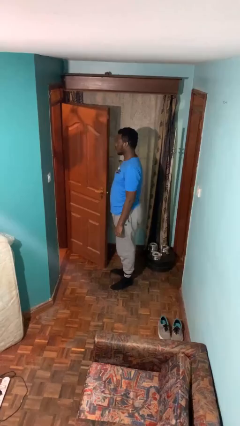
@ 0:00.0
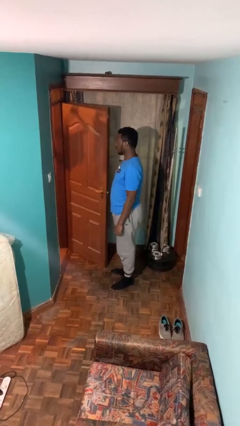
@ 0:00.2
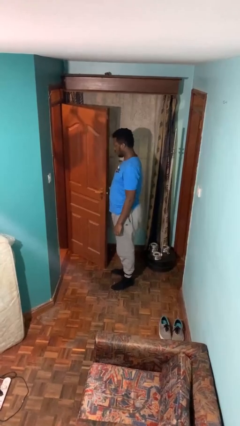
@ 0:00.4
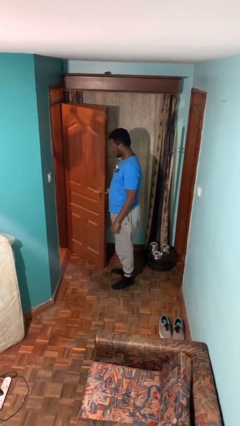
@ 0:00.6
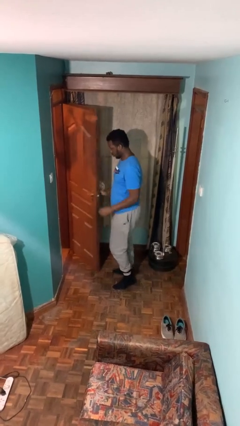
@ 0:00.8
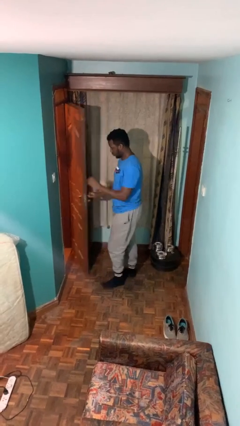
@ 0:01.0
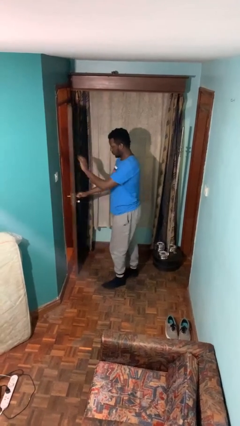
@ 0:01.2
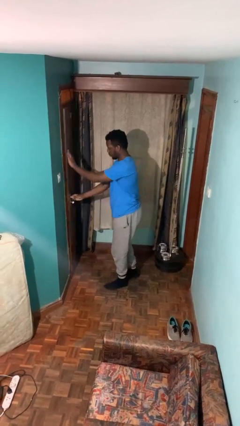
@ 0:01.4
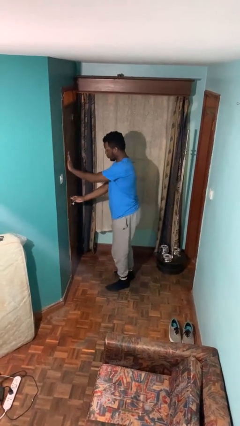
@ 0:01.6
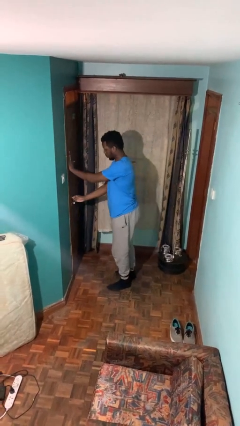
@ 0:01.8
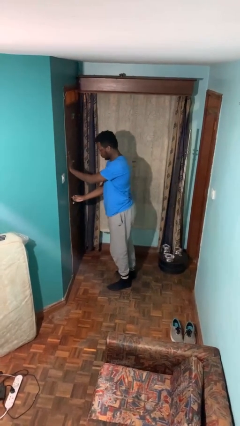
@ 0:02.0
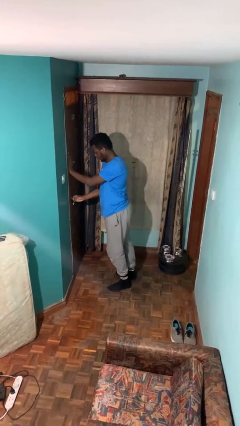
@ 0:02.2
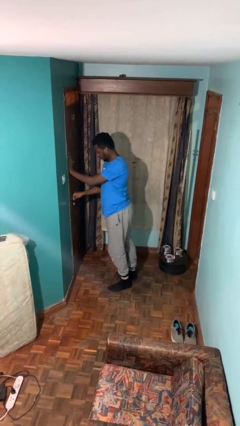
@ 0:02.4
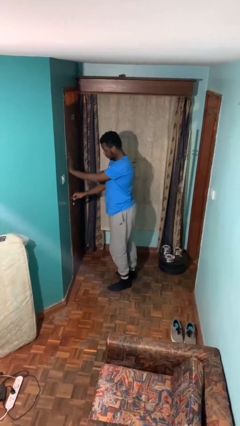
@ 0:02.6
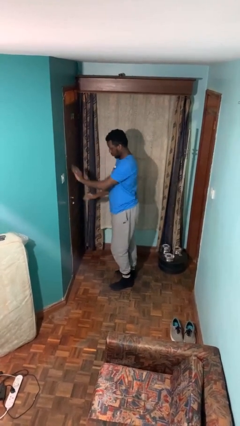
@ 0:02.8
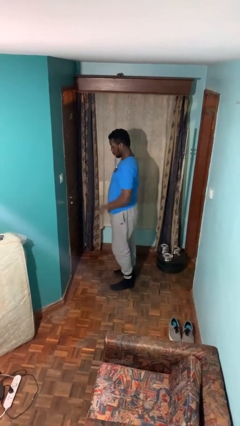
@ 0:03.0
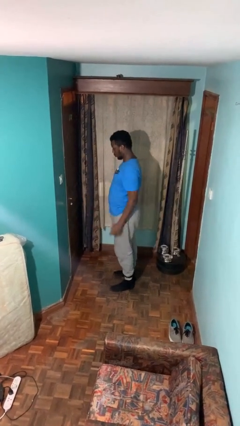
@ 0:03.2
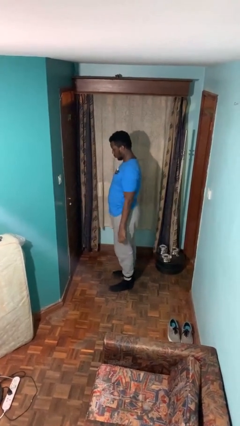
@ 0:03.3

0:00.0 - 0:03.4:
person closes facility door

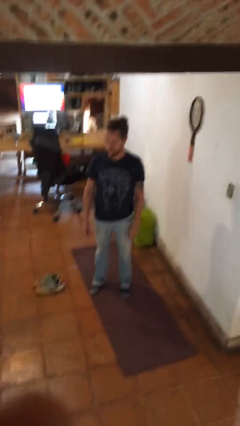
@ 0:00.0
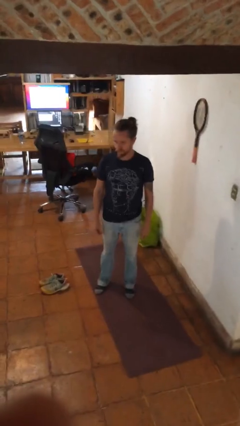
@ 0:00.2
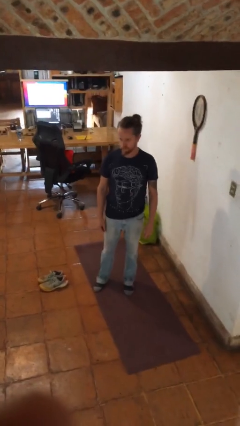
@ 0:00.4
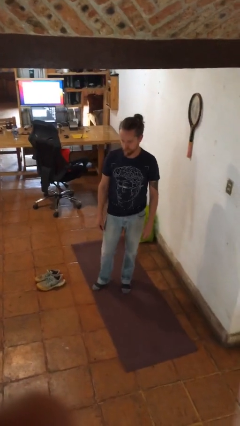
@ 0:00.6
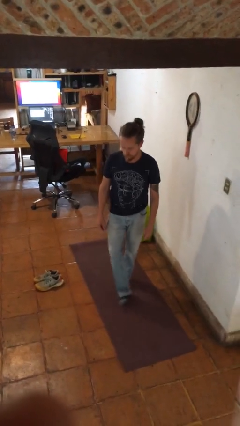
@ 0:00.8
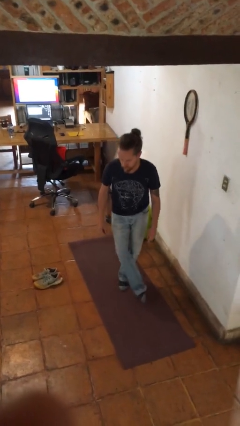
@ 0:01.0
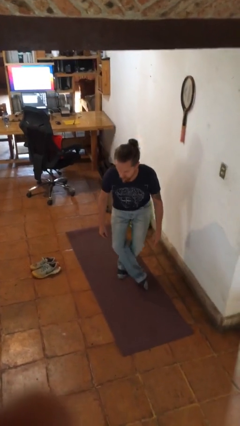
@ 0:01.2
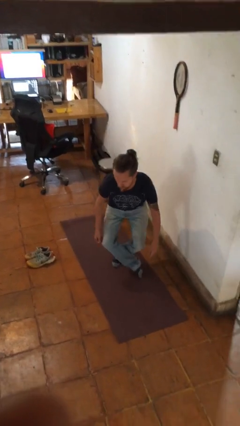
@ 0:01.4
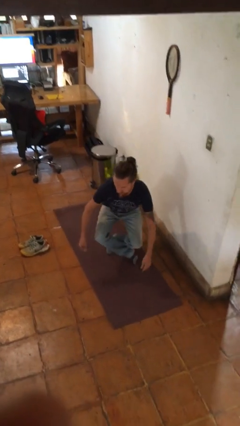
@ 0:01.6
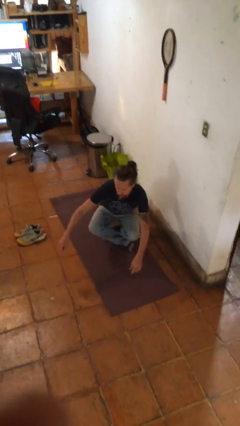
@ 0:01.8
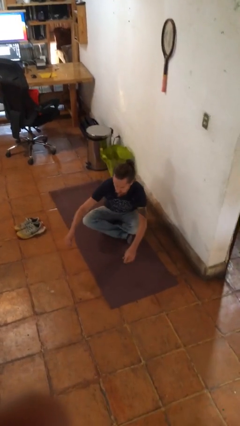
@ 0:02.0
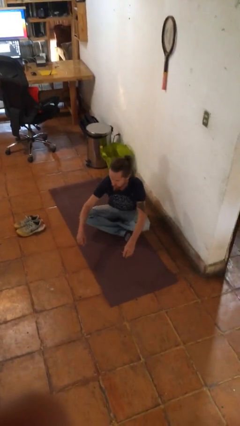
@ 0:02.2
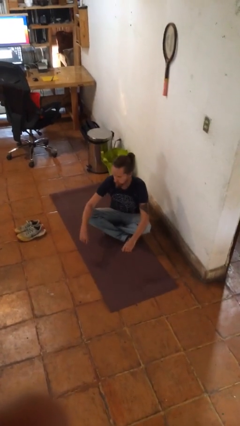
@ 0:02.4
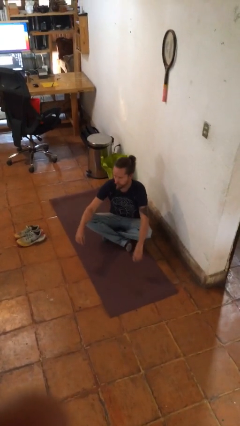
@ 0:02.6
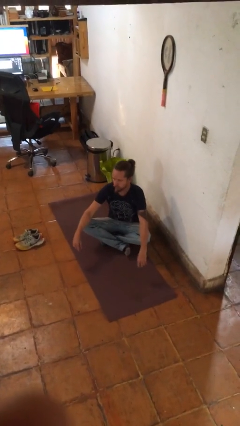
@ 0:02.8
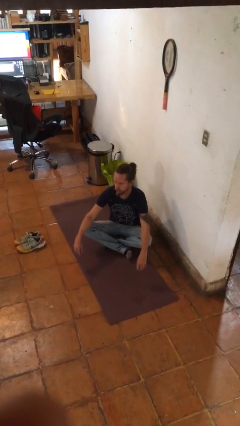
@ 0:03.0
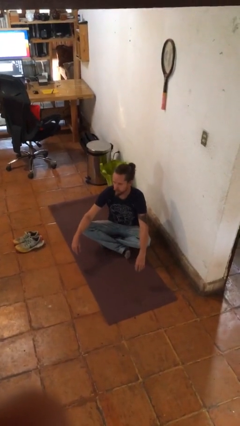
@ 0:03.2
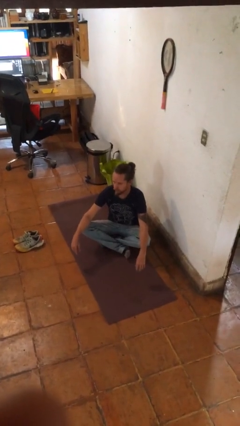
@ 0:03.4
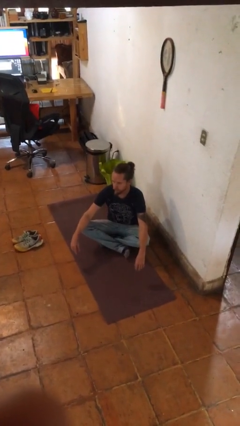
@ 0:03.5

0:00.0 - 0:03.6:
person sits crisscross

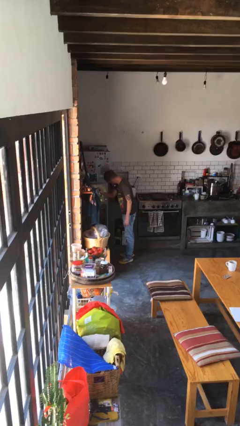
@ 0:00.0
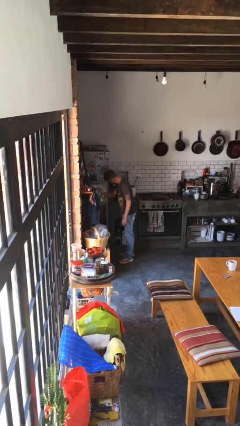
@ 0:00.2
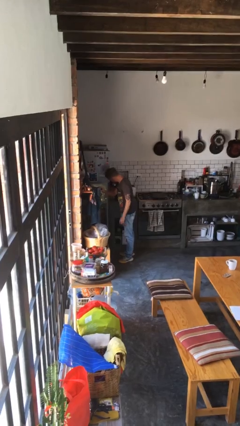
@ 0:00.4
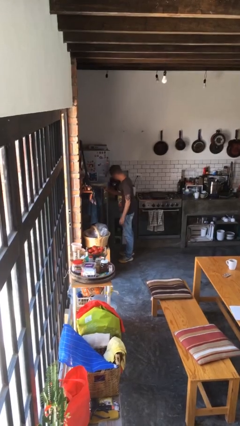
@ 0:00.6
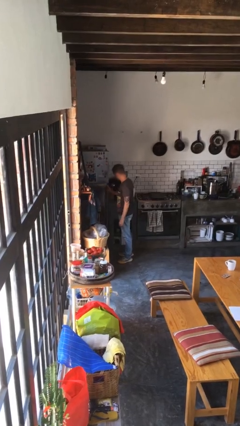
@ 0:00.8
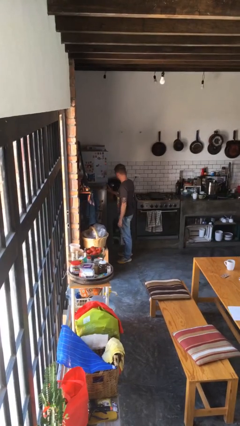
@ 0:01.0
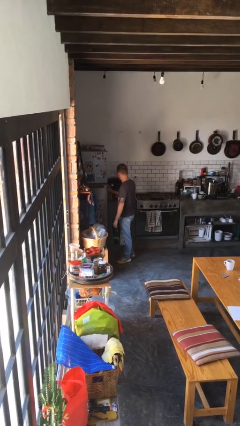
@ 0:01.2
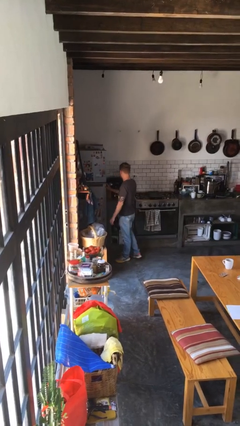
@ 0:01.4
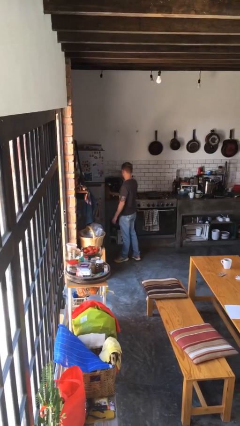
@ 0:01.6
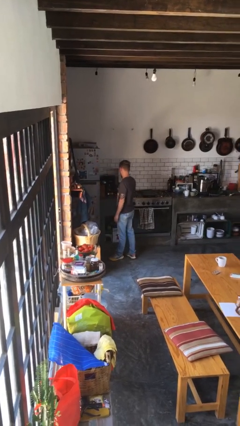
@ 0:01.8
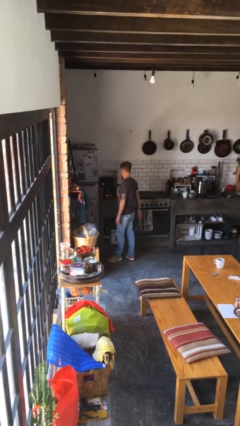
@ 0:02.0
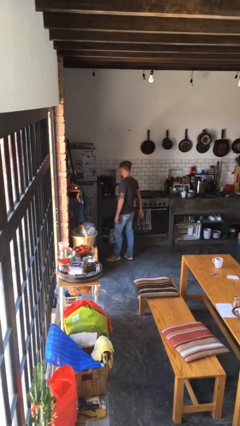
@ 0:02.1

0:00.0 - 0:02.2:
person closes refrigerator

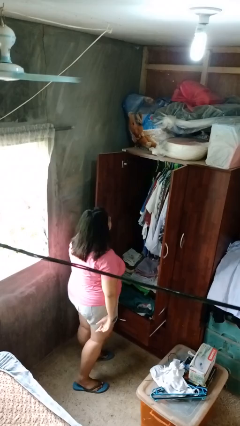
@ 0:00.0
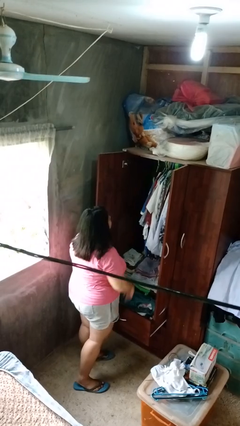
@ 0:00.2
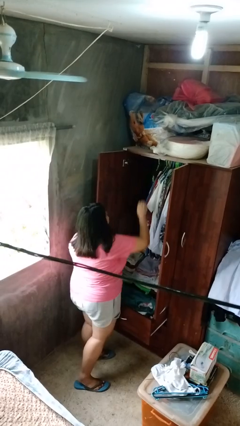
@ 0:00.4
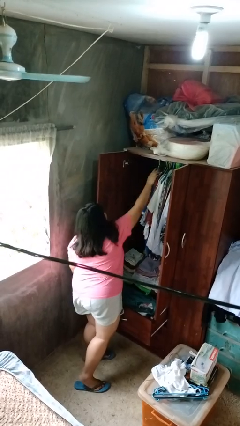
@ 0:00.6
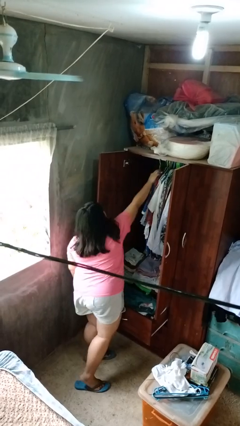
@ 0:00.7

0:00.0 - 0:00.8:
person takes clothes from closet

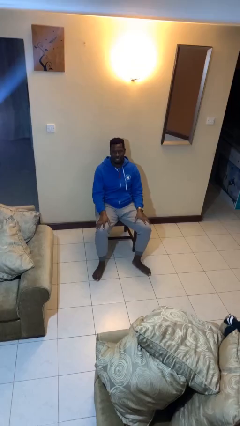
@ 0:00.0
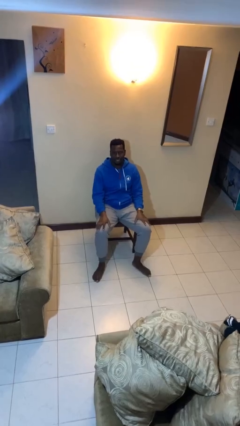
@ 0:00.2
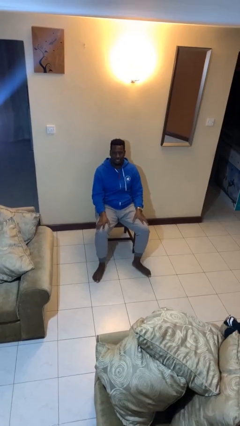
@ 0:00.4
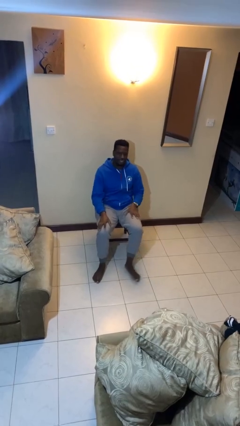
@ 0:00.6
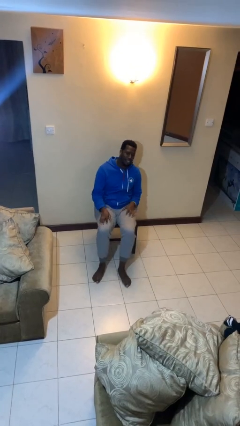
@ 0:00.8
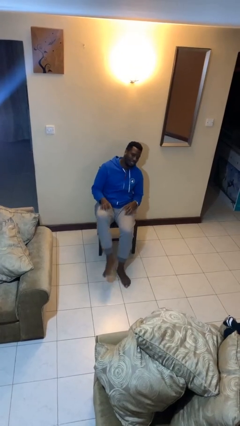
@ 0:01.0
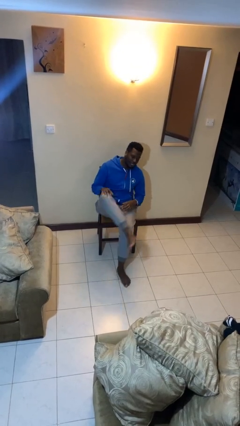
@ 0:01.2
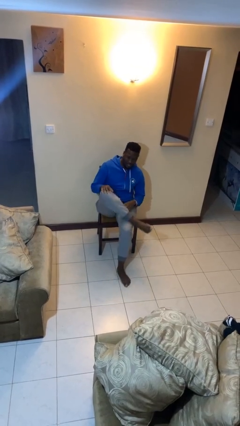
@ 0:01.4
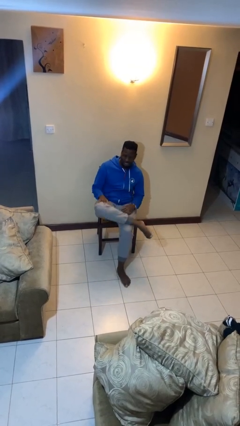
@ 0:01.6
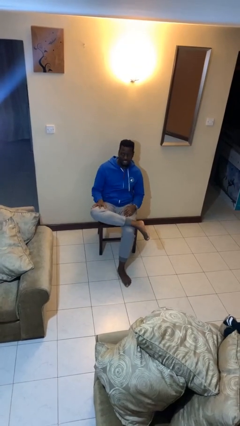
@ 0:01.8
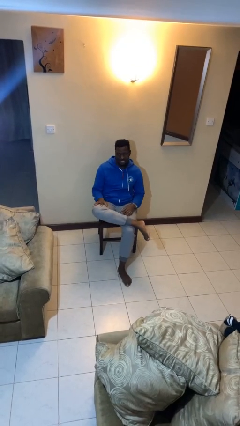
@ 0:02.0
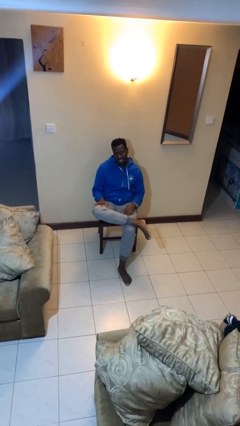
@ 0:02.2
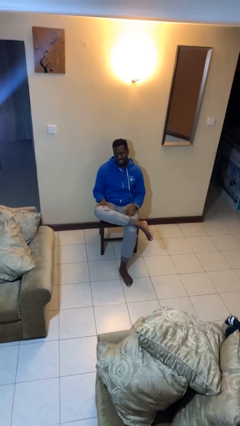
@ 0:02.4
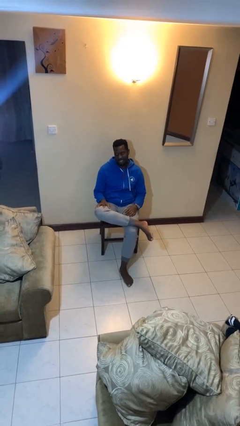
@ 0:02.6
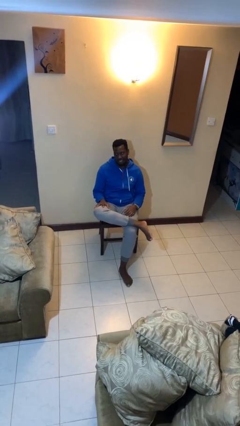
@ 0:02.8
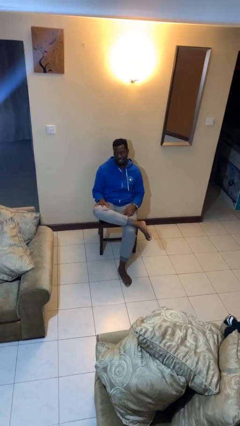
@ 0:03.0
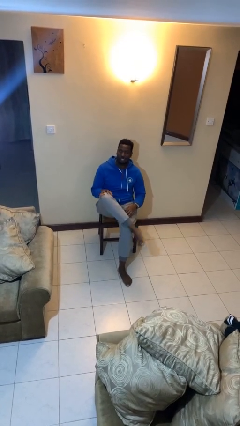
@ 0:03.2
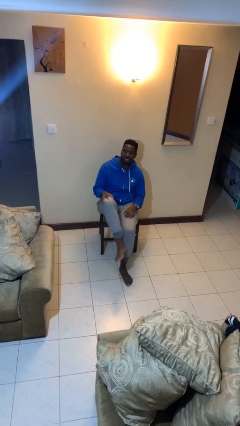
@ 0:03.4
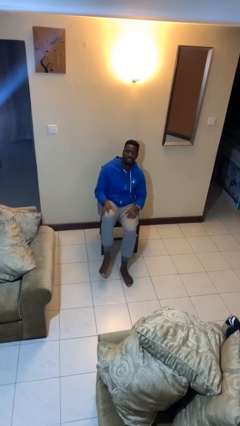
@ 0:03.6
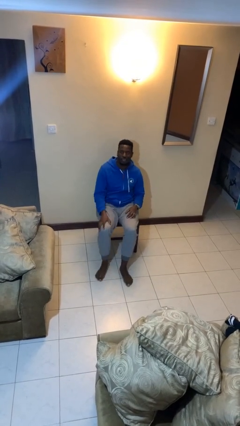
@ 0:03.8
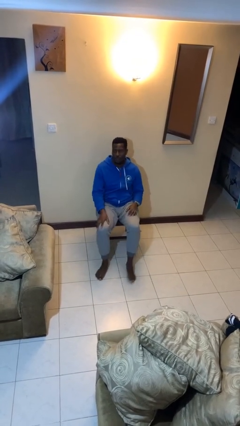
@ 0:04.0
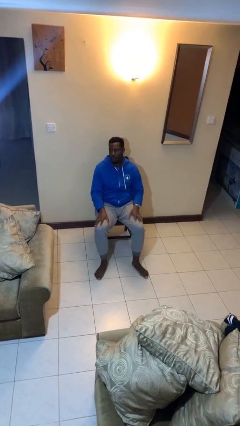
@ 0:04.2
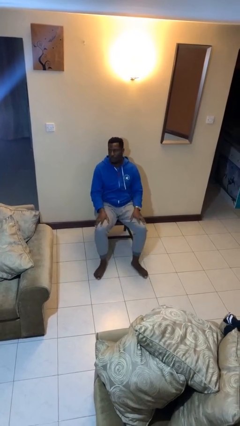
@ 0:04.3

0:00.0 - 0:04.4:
person crosses legs

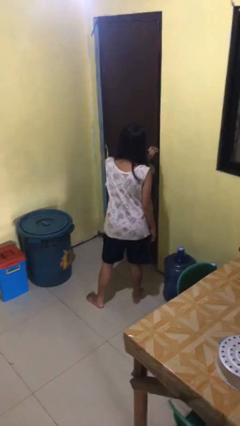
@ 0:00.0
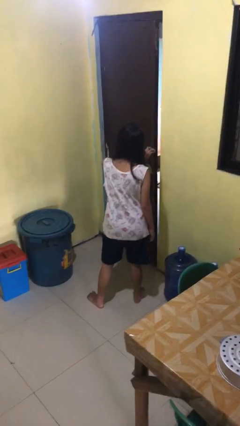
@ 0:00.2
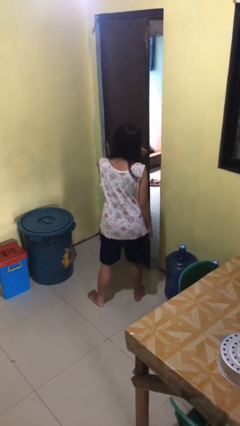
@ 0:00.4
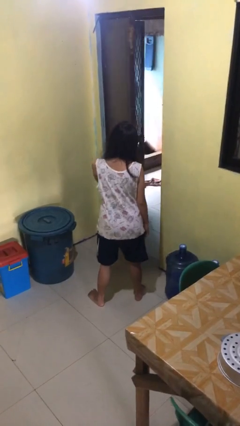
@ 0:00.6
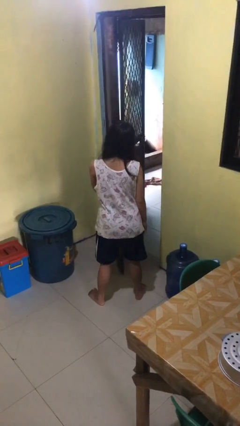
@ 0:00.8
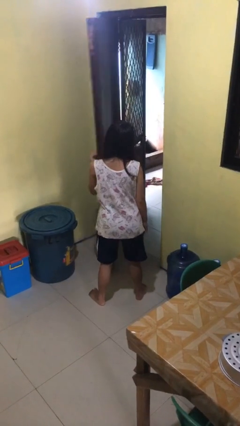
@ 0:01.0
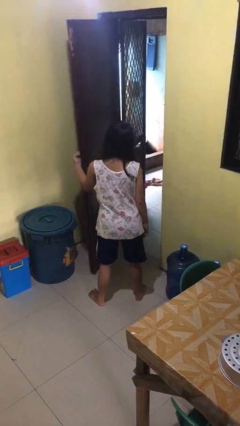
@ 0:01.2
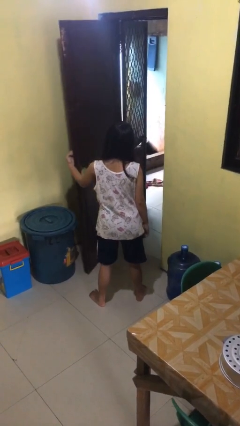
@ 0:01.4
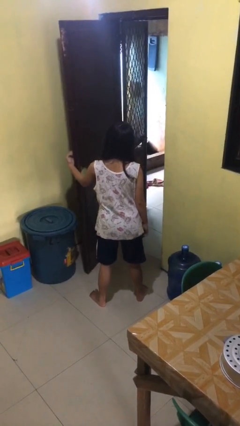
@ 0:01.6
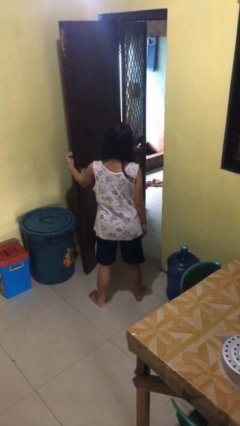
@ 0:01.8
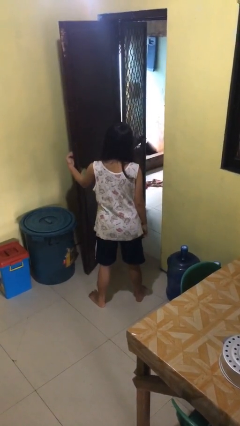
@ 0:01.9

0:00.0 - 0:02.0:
person opens facility door

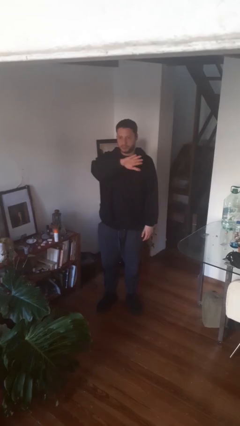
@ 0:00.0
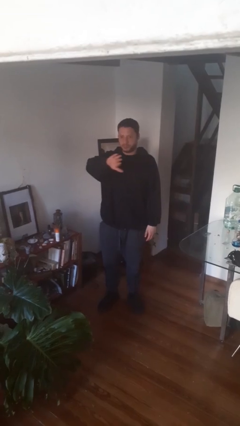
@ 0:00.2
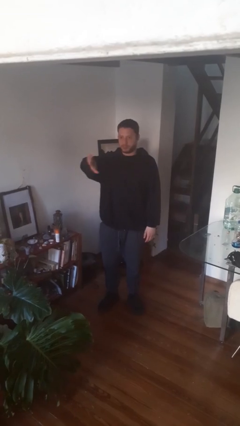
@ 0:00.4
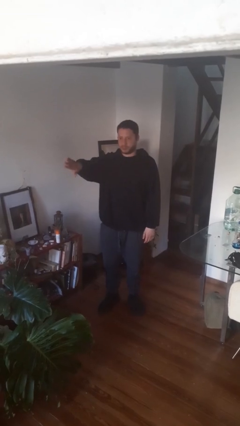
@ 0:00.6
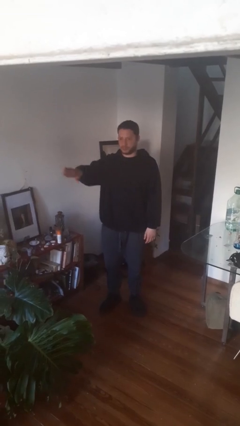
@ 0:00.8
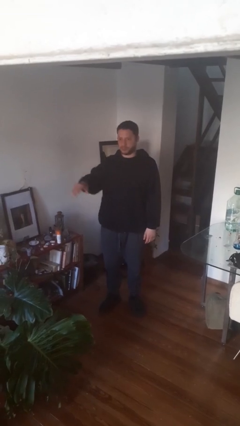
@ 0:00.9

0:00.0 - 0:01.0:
person gestures swipe right
